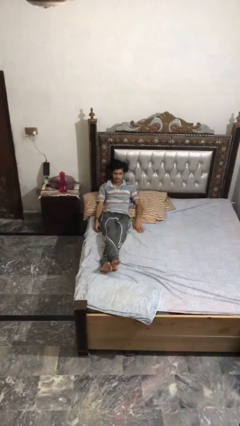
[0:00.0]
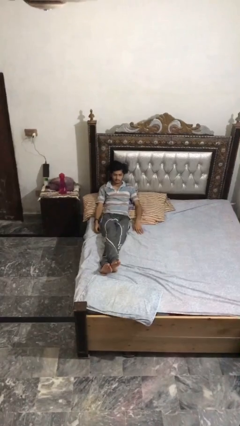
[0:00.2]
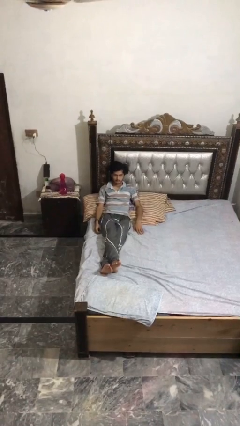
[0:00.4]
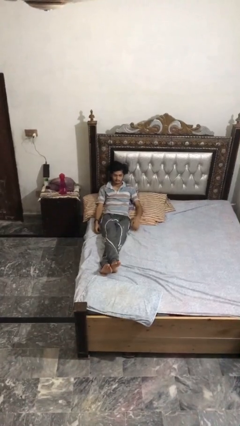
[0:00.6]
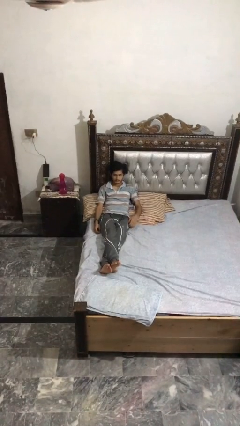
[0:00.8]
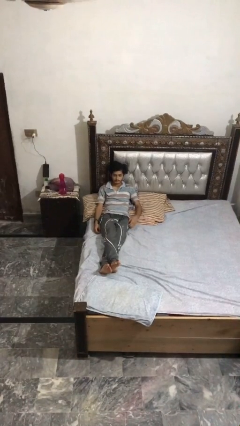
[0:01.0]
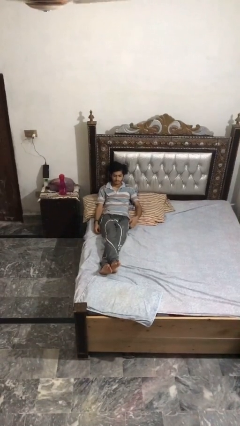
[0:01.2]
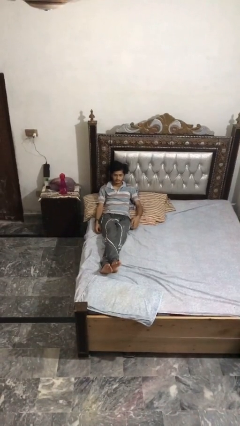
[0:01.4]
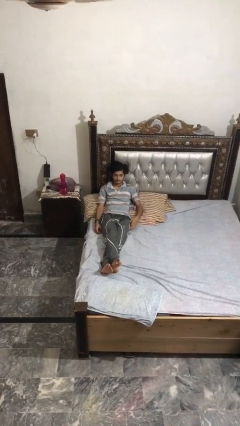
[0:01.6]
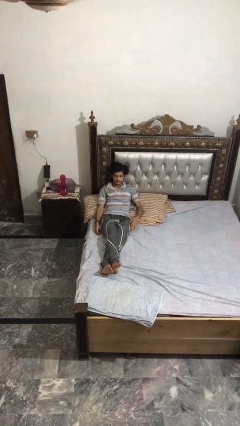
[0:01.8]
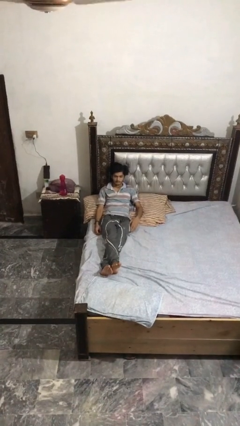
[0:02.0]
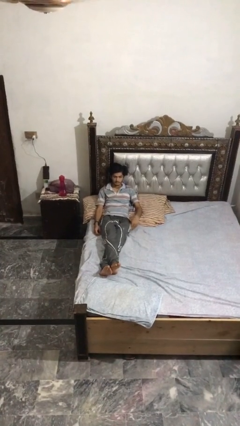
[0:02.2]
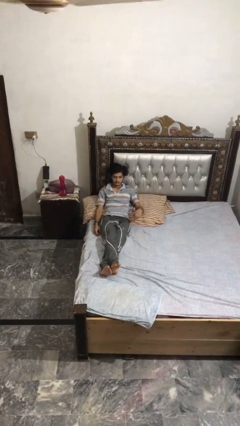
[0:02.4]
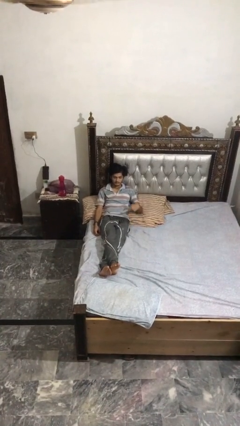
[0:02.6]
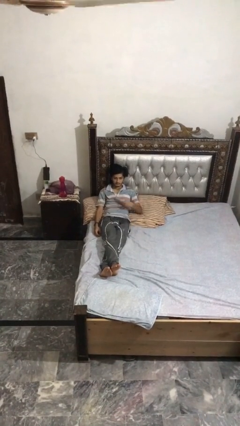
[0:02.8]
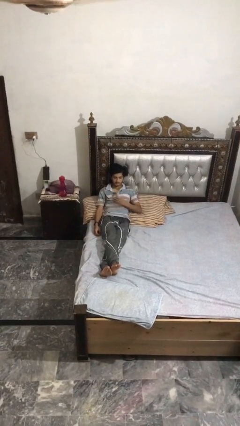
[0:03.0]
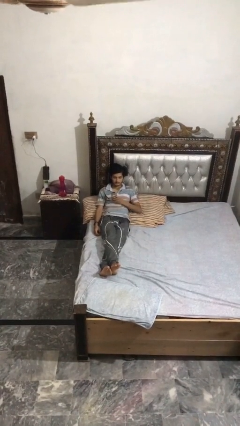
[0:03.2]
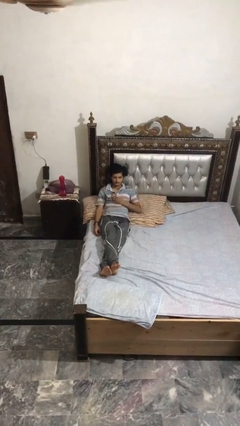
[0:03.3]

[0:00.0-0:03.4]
person takes phone from pocket

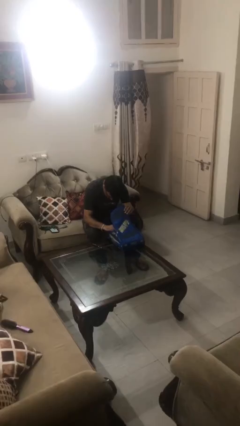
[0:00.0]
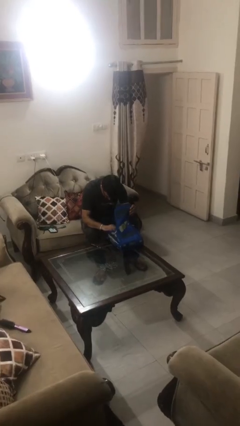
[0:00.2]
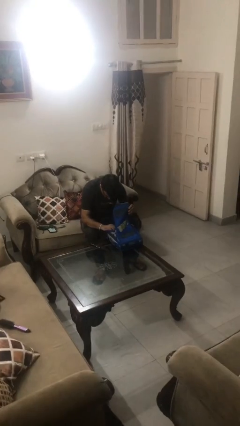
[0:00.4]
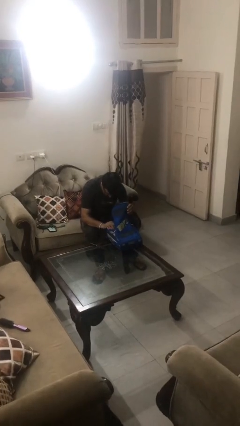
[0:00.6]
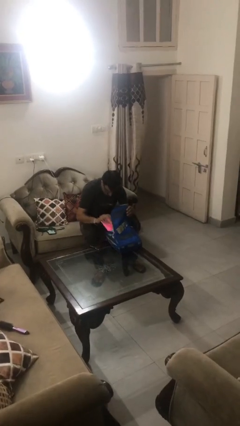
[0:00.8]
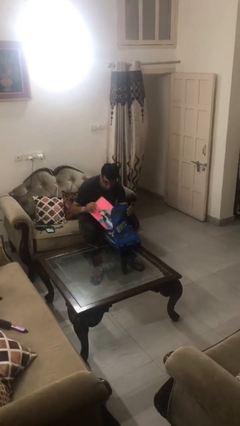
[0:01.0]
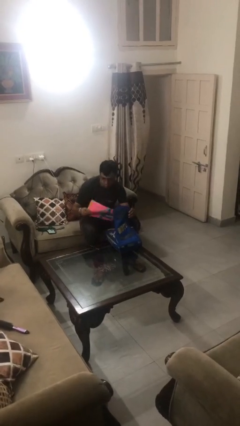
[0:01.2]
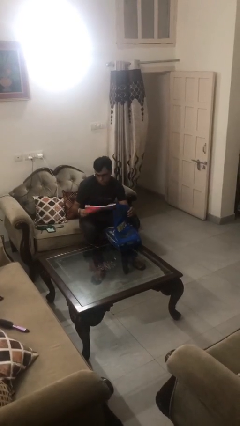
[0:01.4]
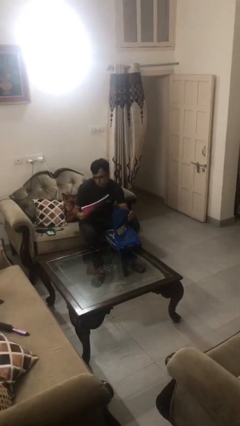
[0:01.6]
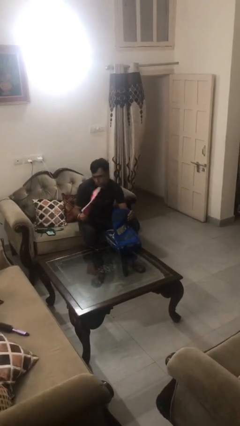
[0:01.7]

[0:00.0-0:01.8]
person takes object from backpack

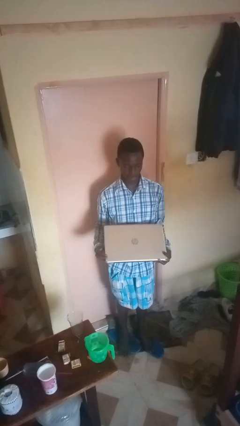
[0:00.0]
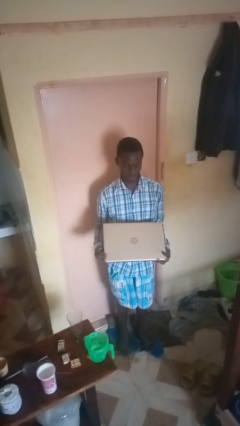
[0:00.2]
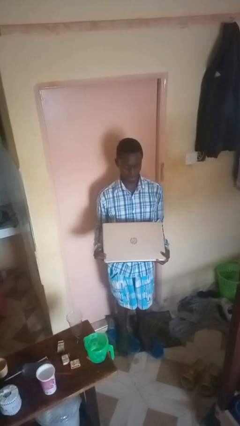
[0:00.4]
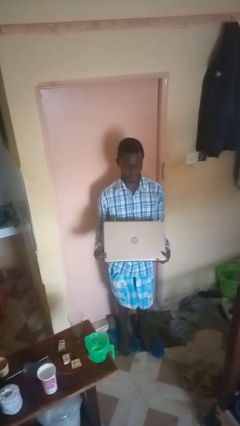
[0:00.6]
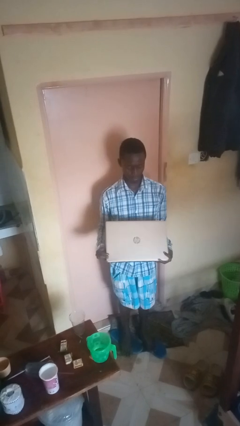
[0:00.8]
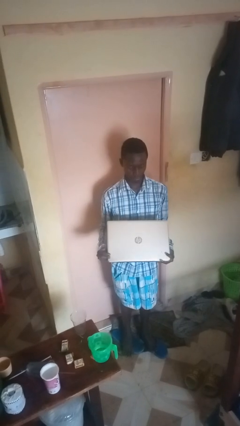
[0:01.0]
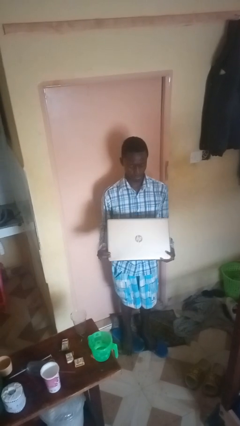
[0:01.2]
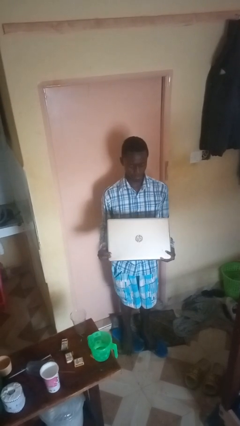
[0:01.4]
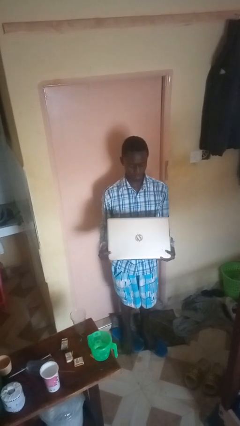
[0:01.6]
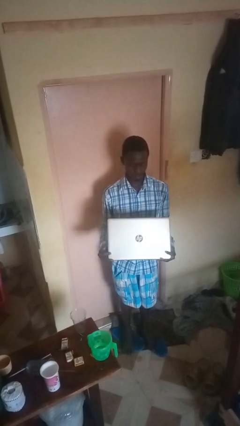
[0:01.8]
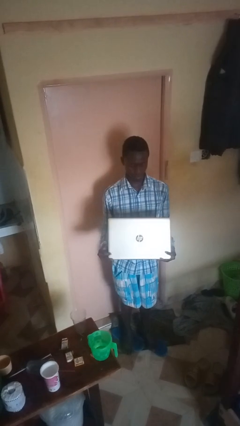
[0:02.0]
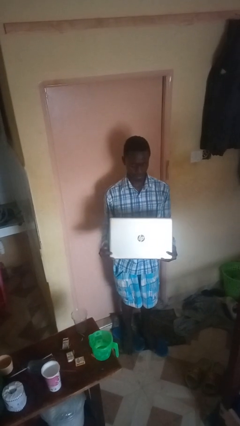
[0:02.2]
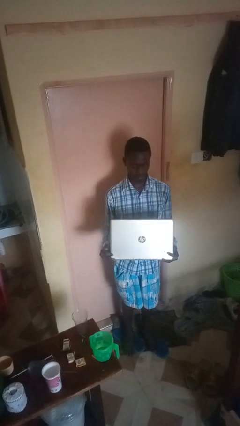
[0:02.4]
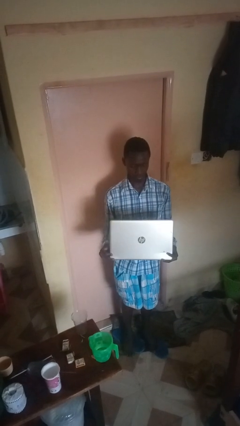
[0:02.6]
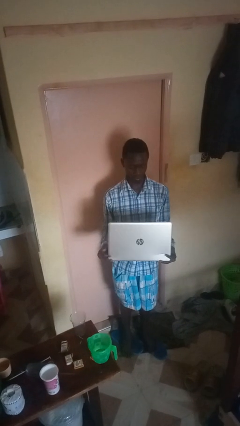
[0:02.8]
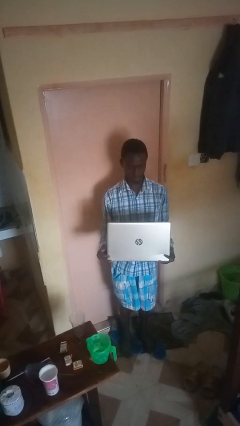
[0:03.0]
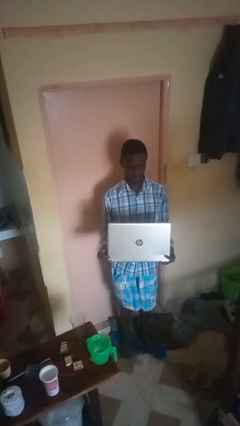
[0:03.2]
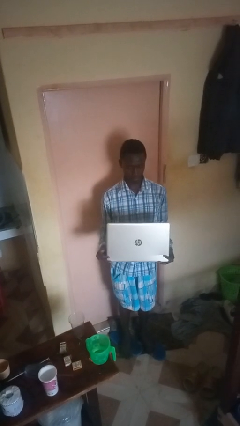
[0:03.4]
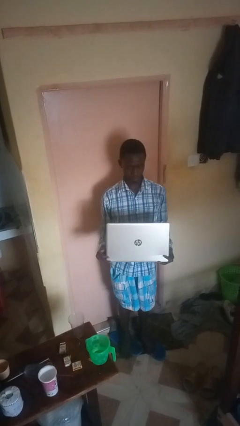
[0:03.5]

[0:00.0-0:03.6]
person opens laptop

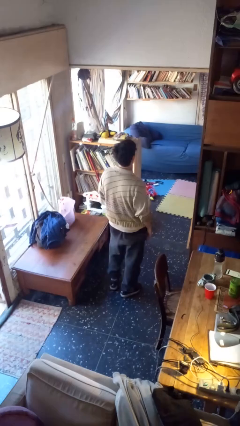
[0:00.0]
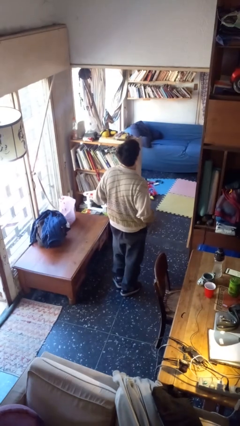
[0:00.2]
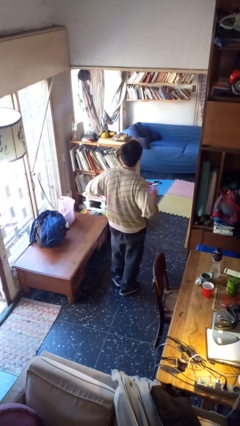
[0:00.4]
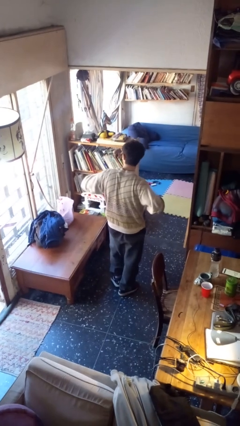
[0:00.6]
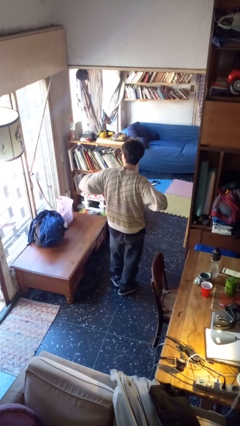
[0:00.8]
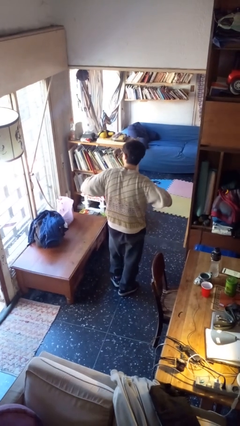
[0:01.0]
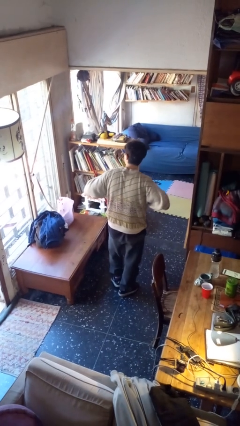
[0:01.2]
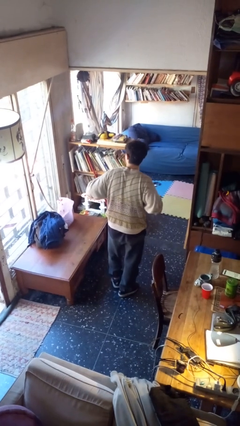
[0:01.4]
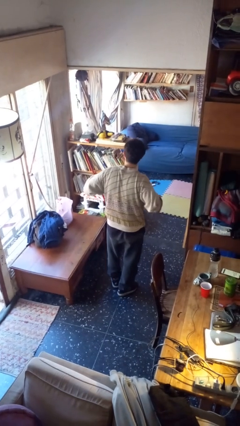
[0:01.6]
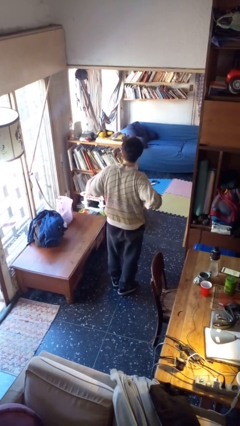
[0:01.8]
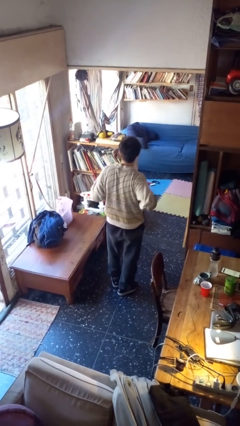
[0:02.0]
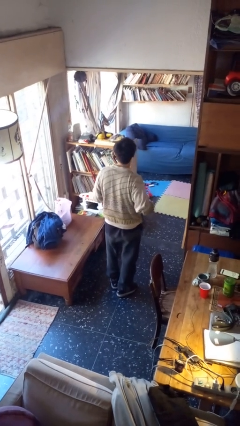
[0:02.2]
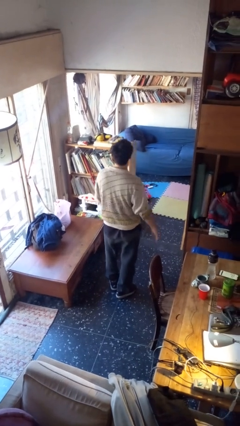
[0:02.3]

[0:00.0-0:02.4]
person drums on chest

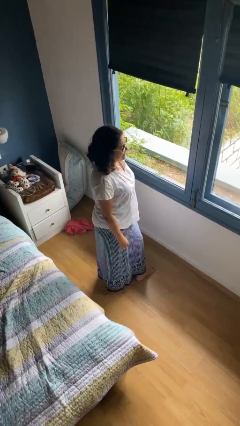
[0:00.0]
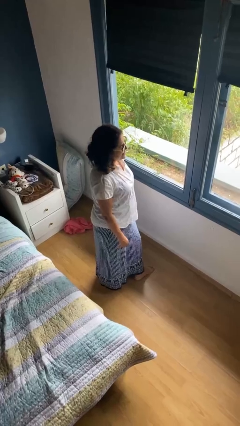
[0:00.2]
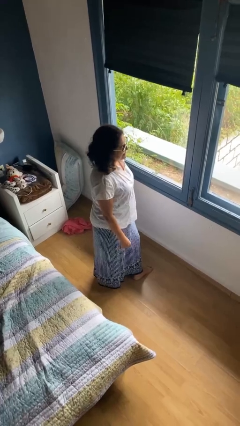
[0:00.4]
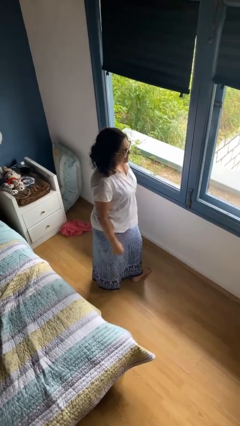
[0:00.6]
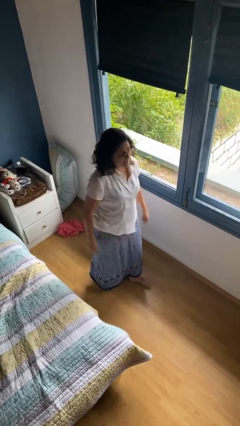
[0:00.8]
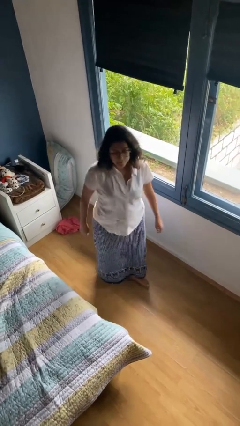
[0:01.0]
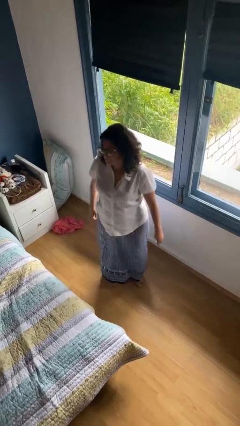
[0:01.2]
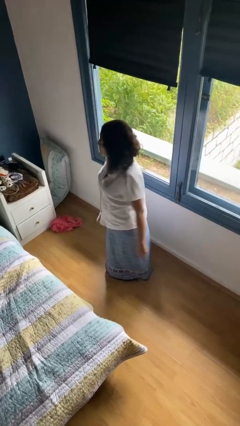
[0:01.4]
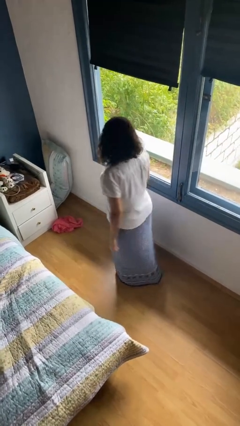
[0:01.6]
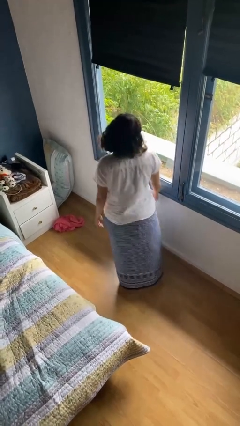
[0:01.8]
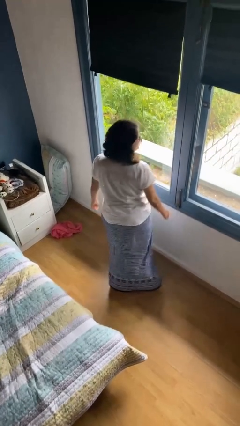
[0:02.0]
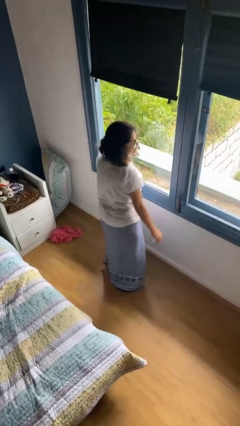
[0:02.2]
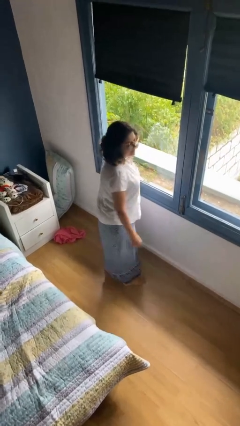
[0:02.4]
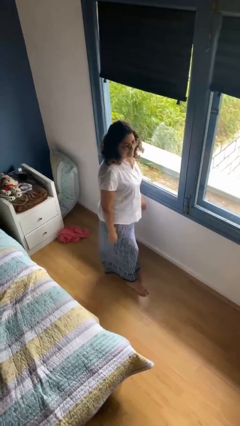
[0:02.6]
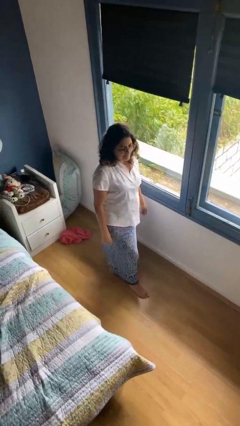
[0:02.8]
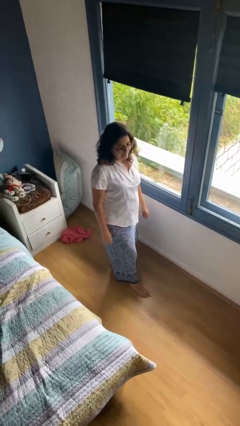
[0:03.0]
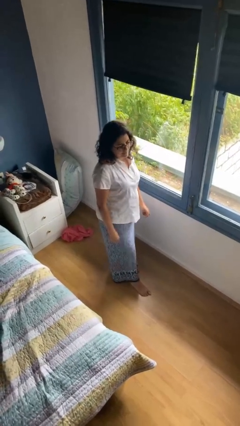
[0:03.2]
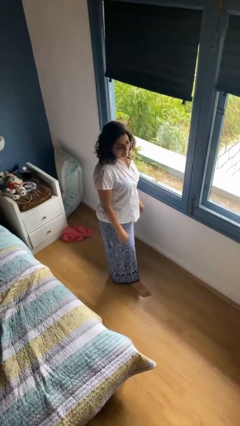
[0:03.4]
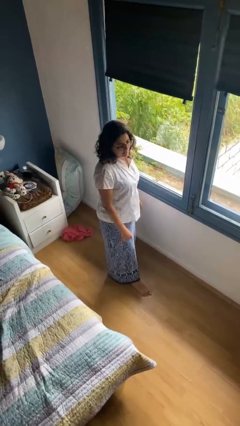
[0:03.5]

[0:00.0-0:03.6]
person twirls

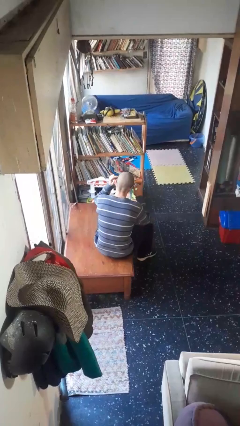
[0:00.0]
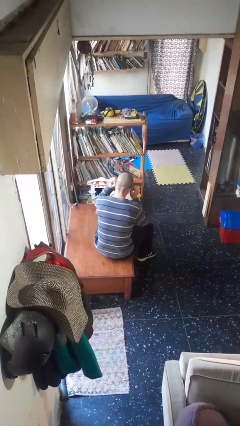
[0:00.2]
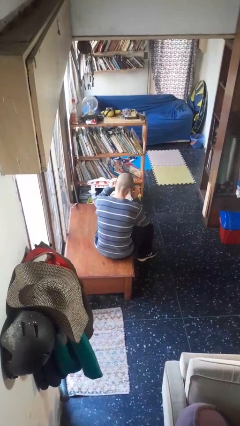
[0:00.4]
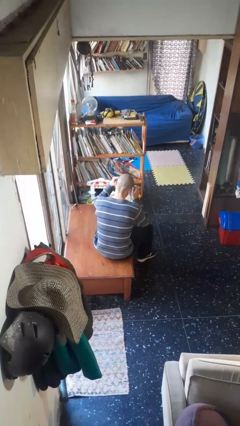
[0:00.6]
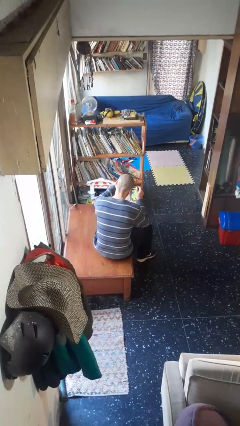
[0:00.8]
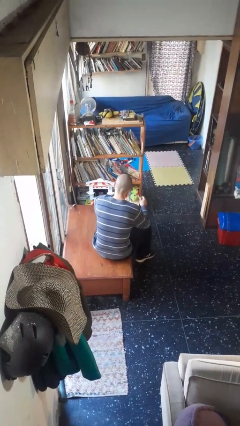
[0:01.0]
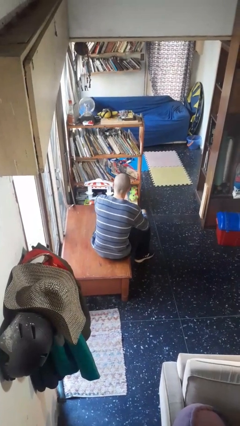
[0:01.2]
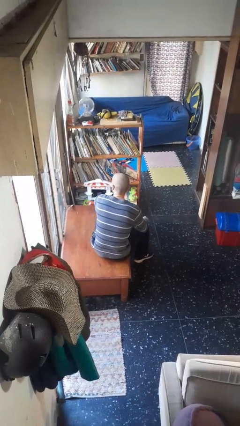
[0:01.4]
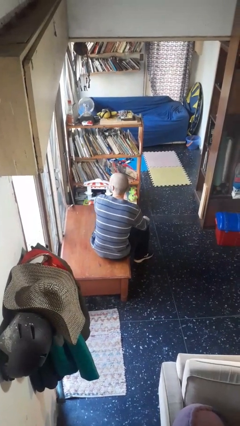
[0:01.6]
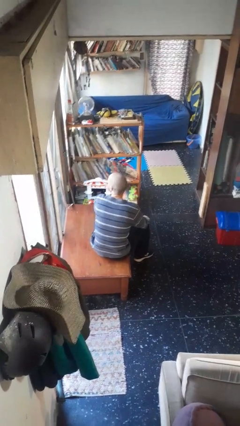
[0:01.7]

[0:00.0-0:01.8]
person takes off glasses

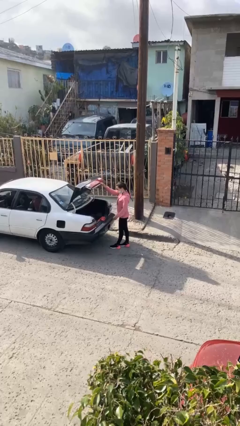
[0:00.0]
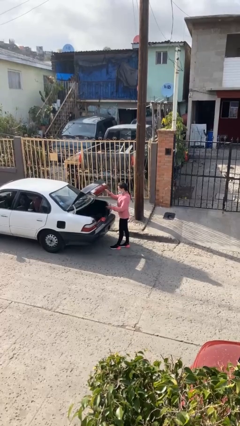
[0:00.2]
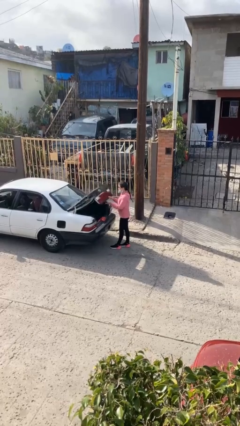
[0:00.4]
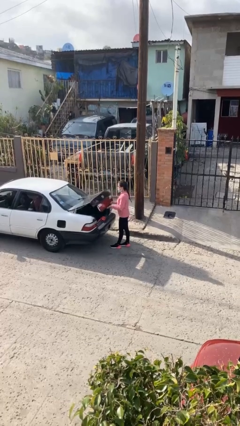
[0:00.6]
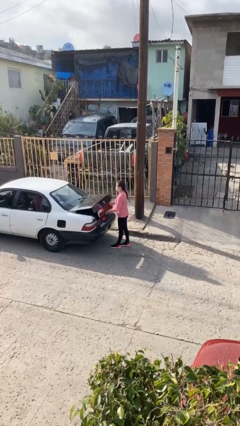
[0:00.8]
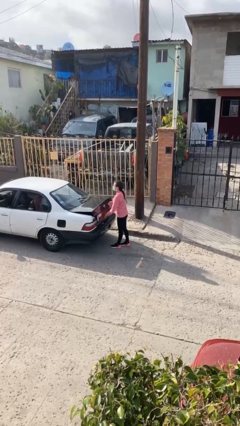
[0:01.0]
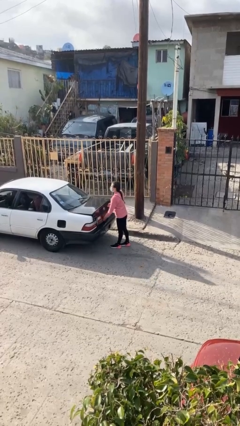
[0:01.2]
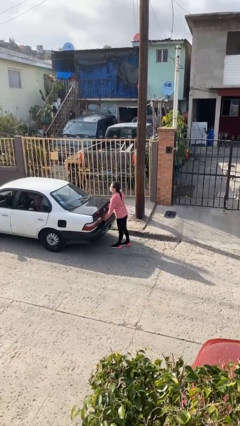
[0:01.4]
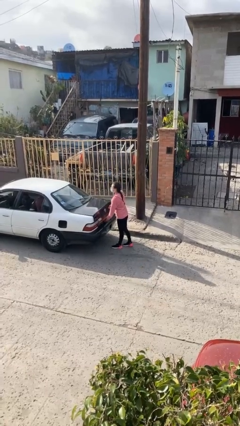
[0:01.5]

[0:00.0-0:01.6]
person closes car trunk
